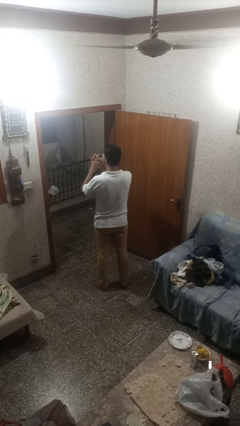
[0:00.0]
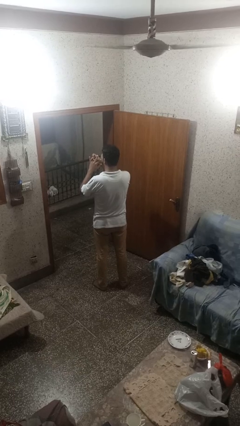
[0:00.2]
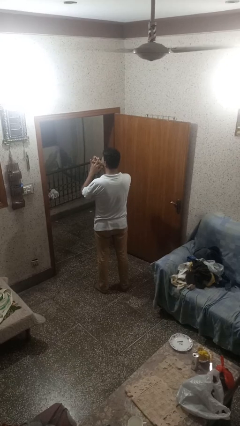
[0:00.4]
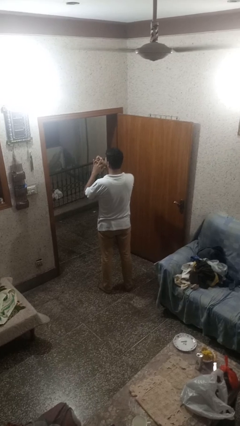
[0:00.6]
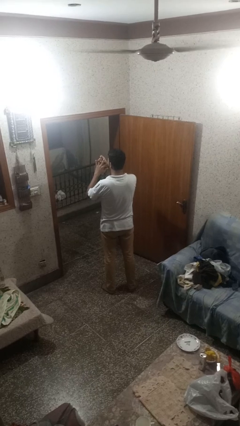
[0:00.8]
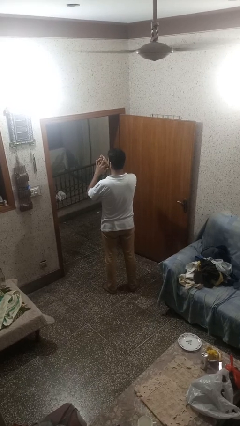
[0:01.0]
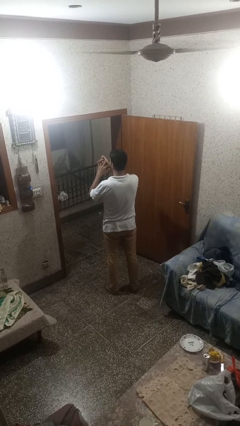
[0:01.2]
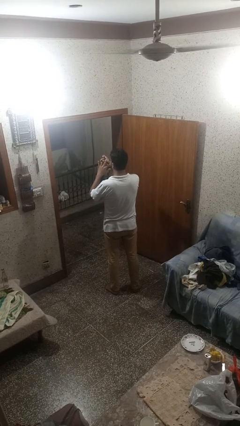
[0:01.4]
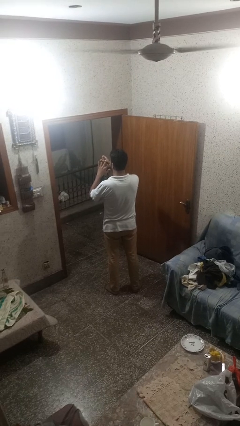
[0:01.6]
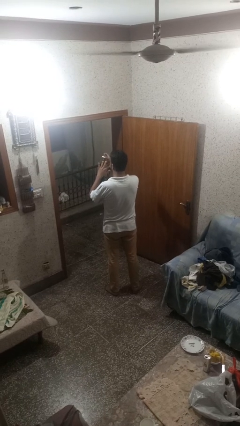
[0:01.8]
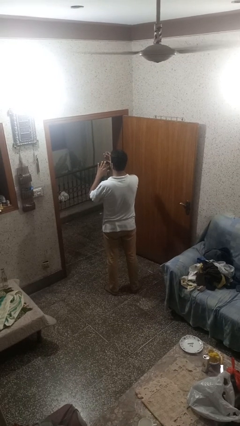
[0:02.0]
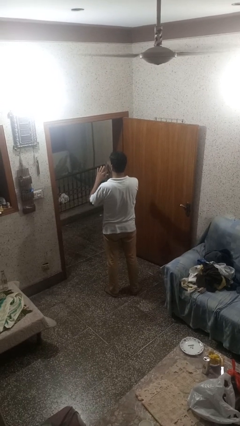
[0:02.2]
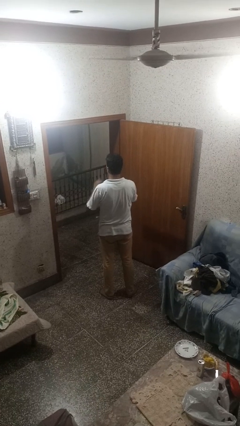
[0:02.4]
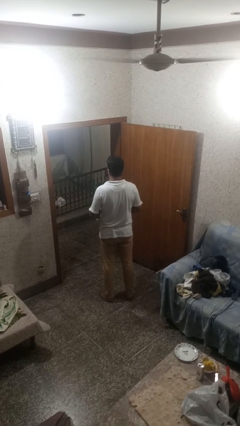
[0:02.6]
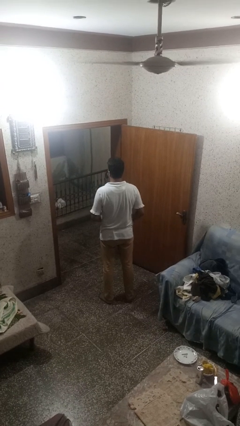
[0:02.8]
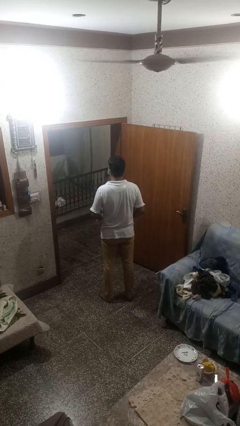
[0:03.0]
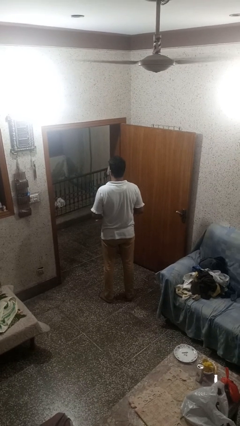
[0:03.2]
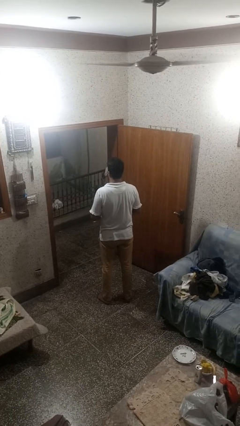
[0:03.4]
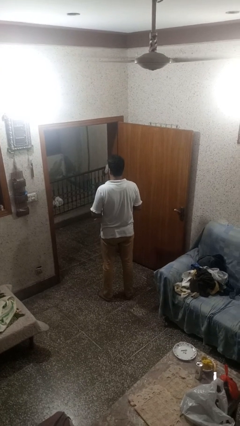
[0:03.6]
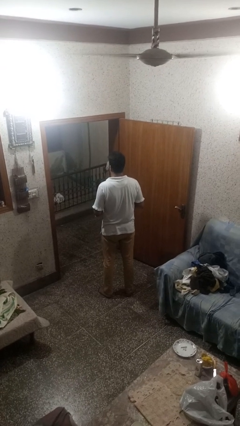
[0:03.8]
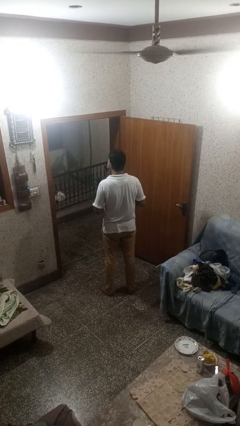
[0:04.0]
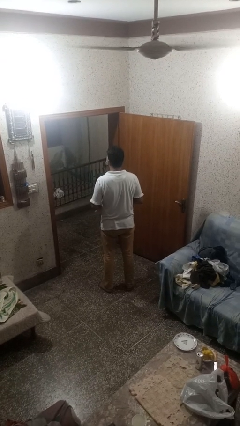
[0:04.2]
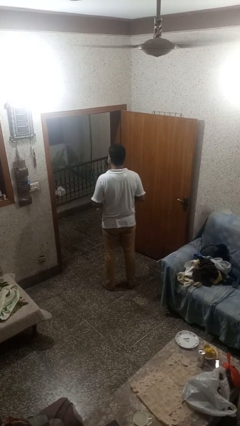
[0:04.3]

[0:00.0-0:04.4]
person takes off ring

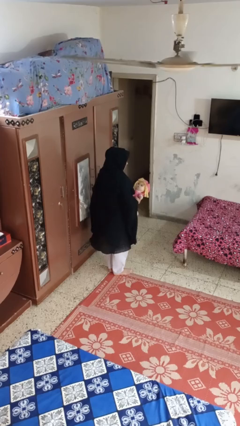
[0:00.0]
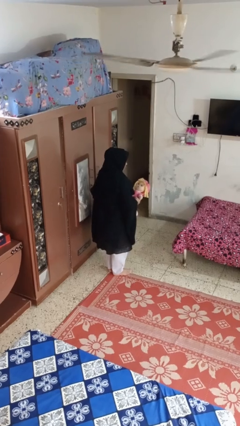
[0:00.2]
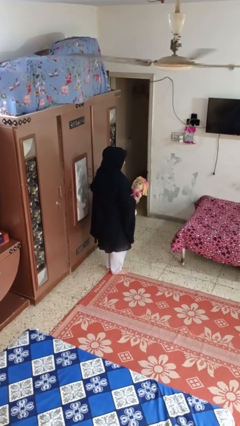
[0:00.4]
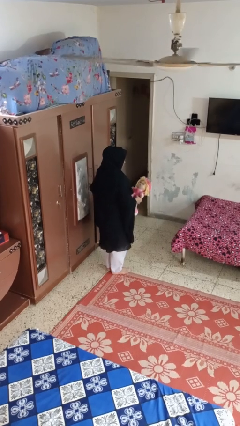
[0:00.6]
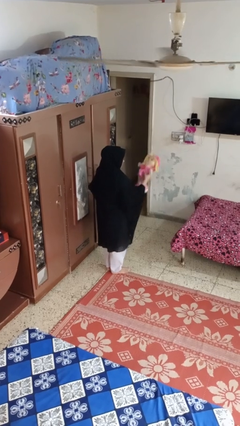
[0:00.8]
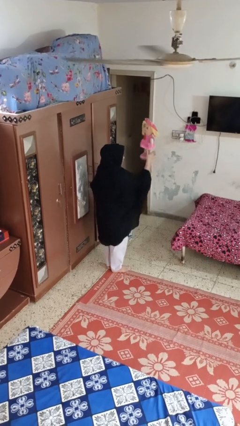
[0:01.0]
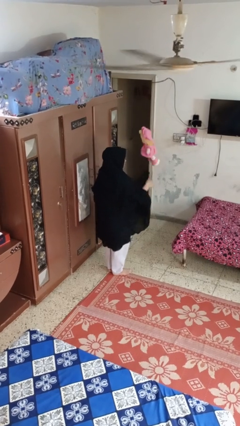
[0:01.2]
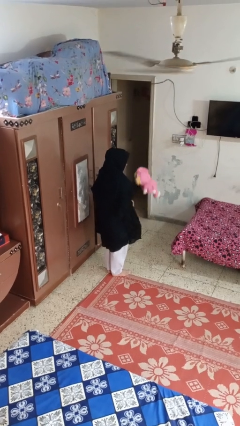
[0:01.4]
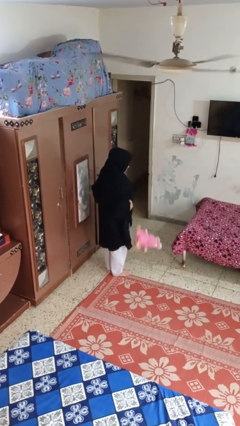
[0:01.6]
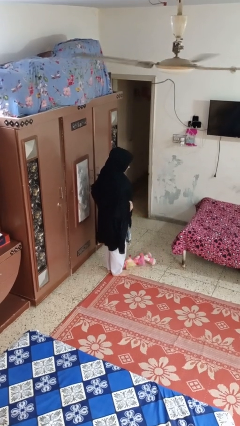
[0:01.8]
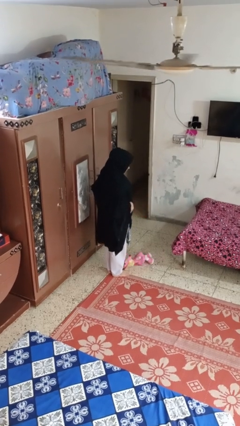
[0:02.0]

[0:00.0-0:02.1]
person throws object into air

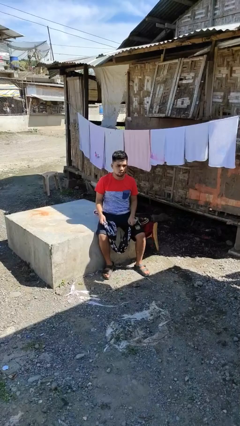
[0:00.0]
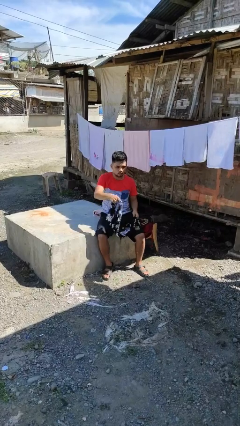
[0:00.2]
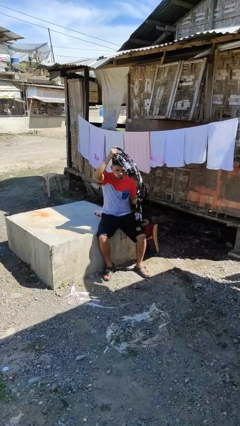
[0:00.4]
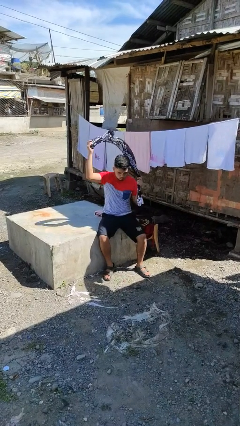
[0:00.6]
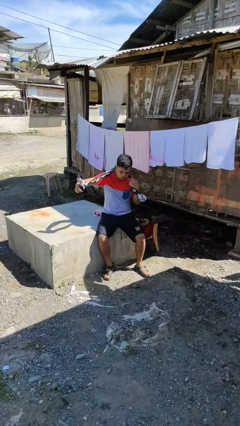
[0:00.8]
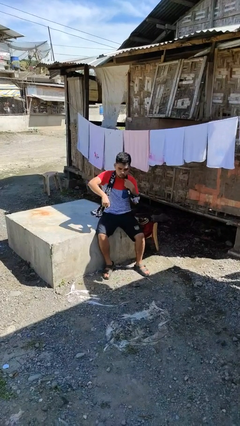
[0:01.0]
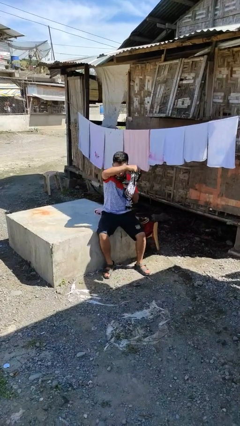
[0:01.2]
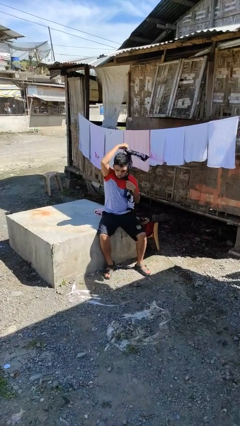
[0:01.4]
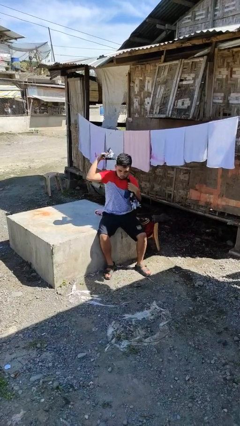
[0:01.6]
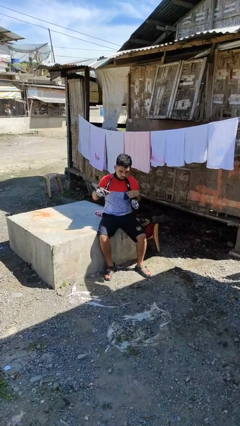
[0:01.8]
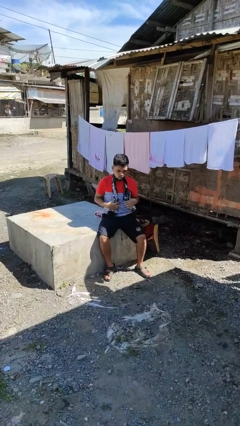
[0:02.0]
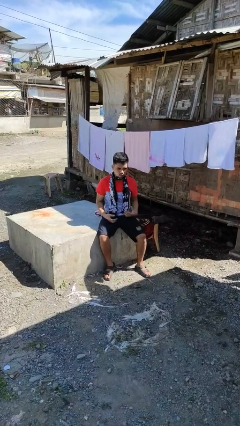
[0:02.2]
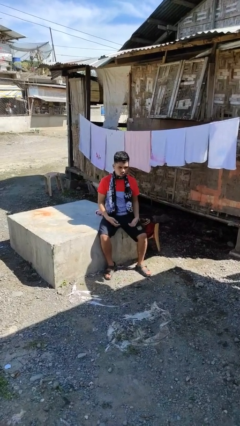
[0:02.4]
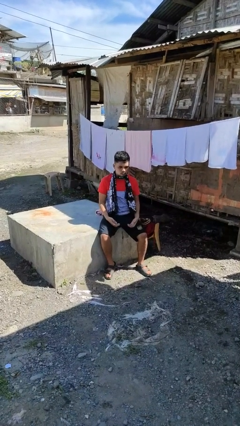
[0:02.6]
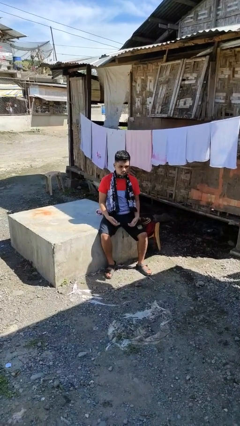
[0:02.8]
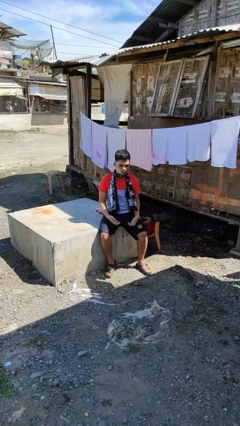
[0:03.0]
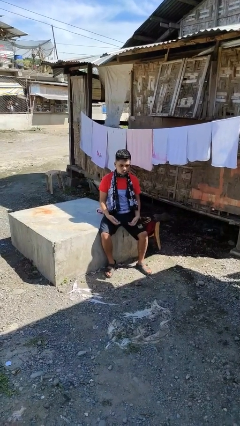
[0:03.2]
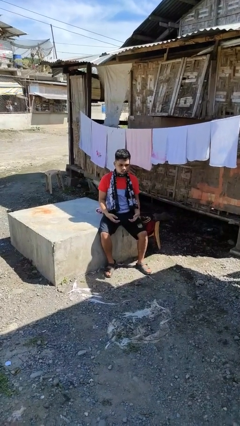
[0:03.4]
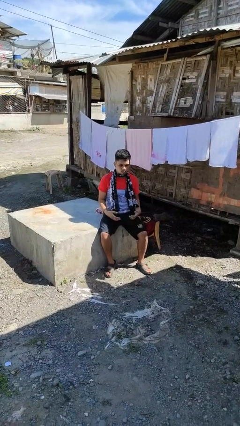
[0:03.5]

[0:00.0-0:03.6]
person puts on scarf

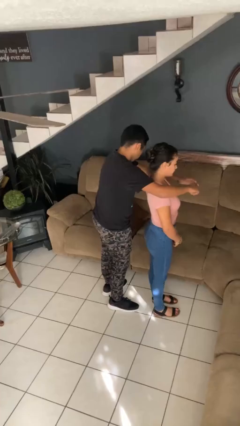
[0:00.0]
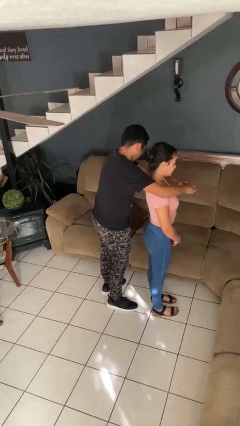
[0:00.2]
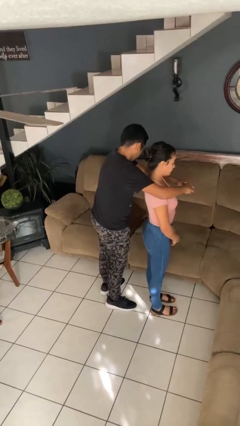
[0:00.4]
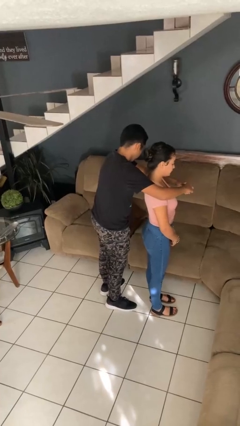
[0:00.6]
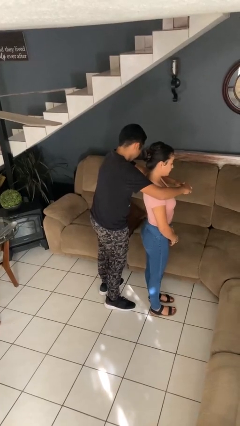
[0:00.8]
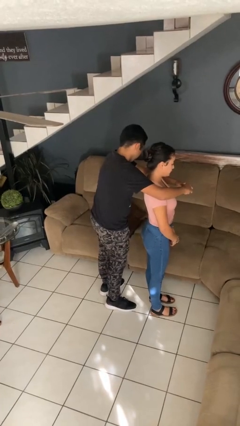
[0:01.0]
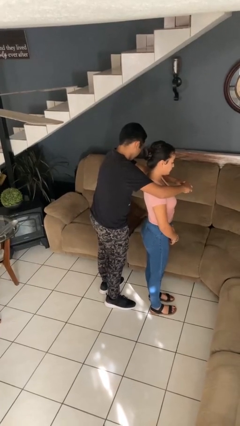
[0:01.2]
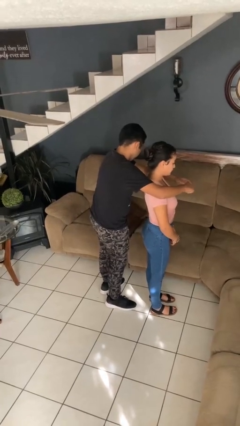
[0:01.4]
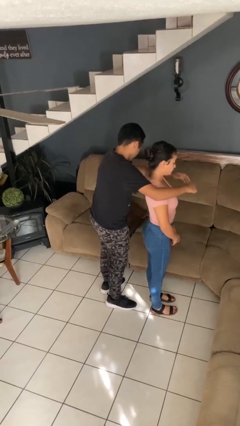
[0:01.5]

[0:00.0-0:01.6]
person hugs person from behind

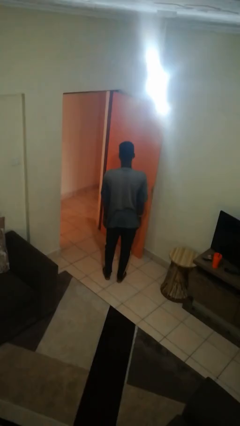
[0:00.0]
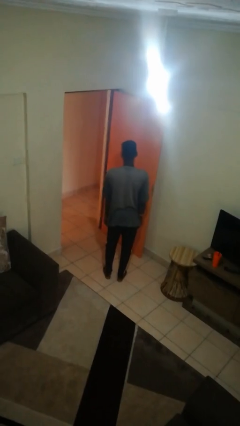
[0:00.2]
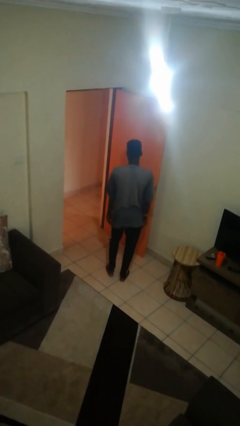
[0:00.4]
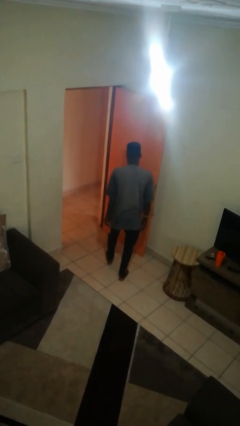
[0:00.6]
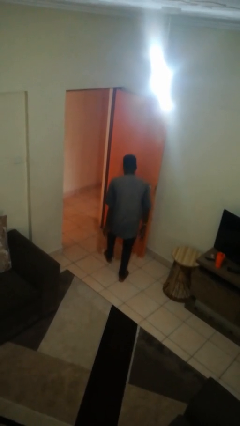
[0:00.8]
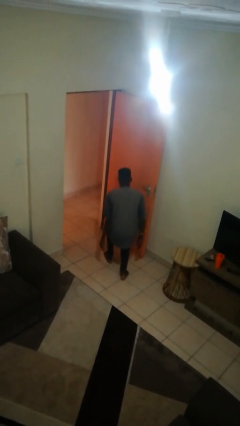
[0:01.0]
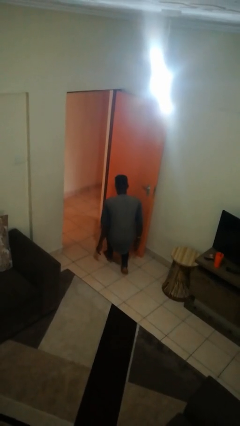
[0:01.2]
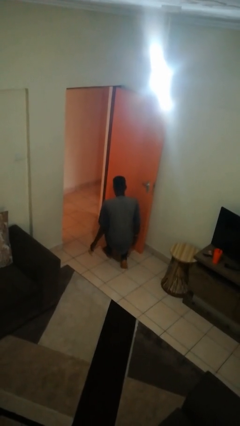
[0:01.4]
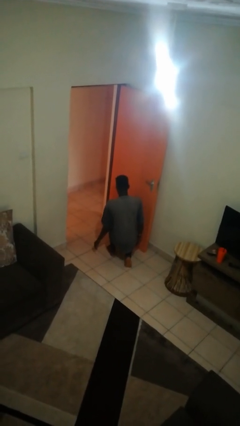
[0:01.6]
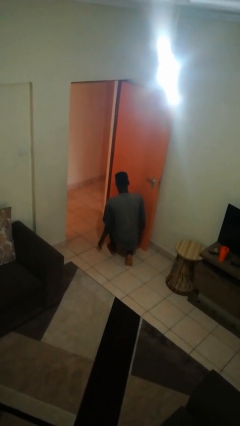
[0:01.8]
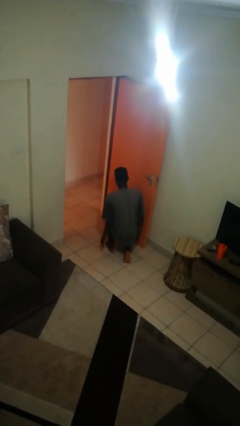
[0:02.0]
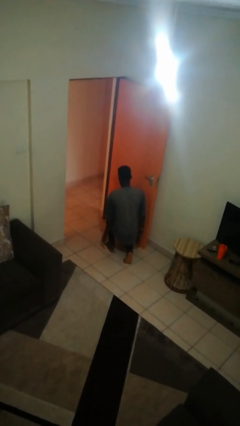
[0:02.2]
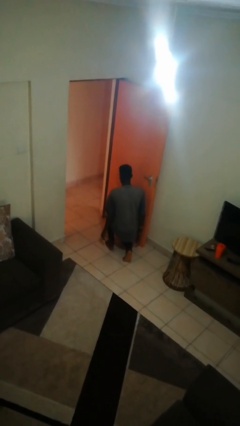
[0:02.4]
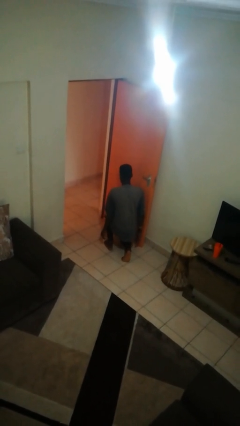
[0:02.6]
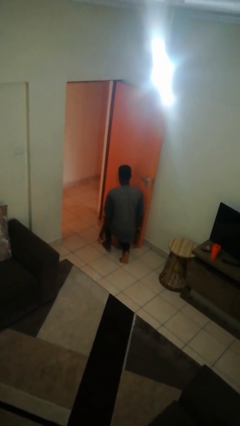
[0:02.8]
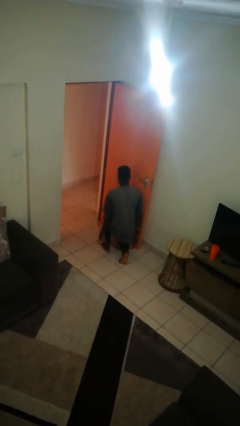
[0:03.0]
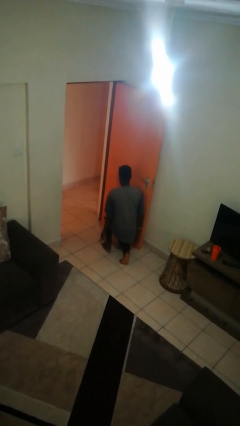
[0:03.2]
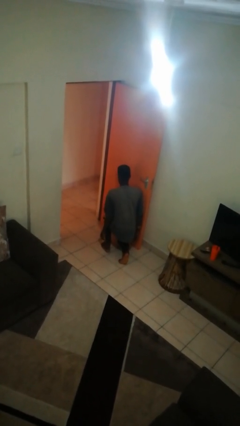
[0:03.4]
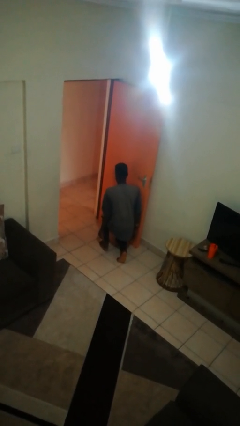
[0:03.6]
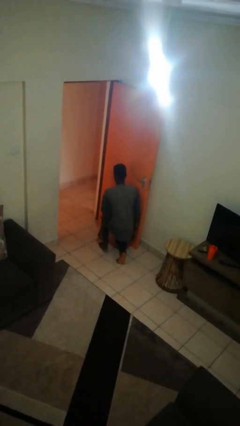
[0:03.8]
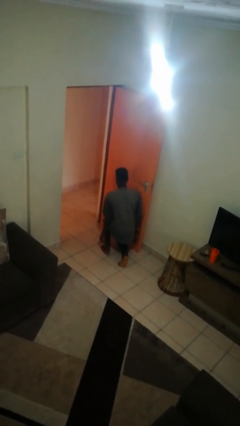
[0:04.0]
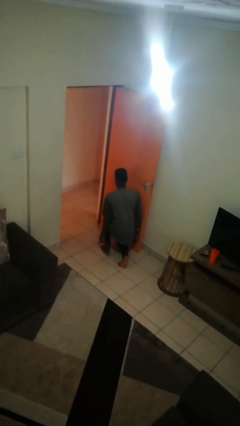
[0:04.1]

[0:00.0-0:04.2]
person kneels

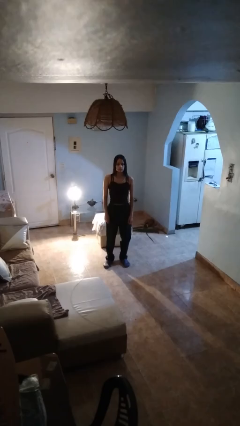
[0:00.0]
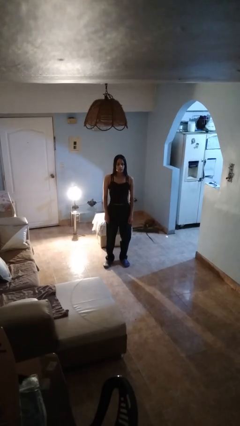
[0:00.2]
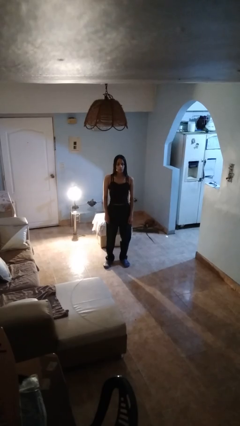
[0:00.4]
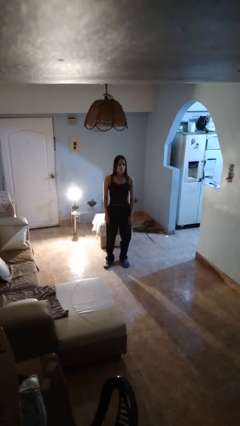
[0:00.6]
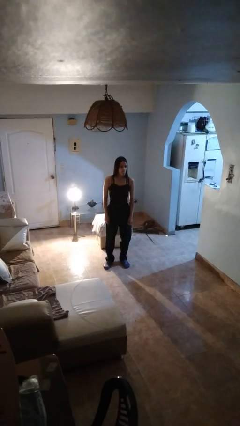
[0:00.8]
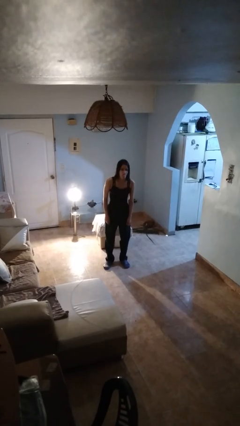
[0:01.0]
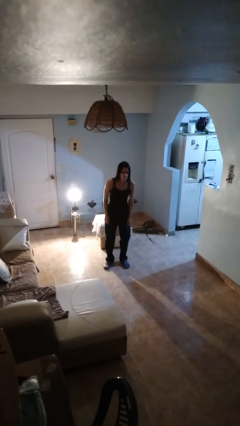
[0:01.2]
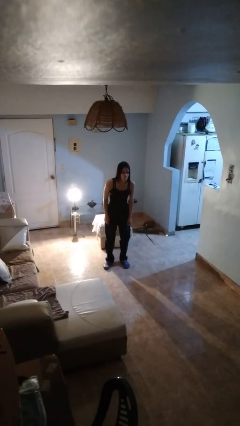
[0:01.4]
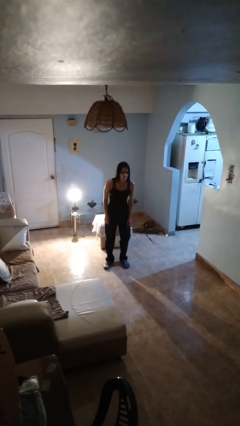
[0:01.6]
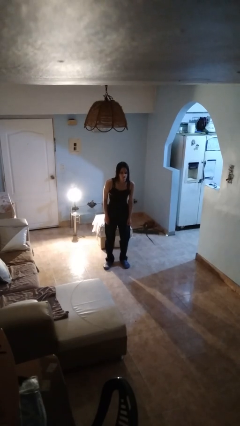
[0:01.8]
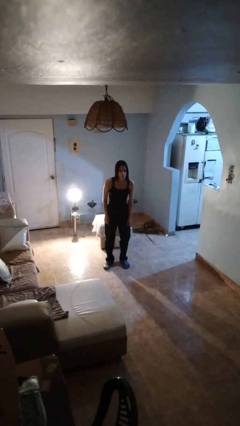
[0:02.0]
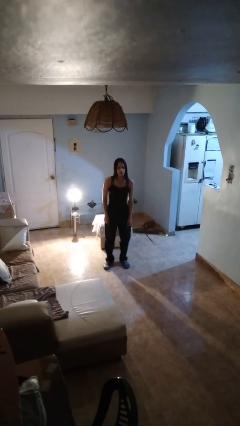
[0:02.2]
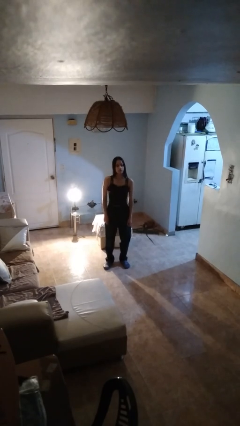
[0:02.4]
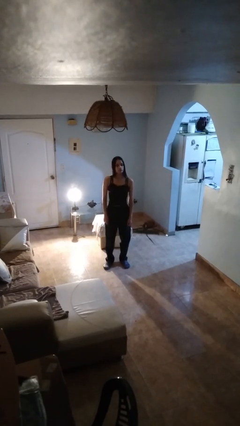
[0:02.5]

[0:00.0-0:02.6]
person sticks out tongue
